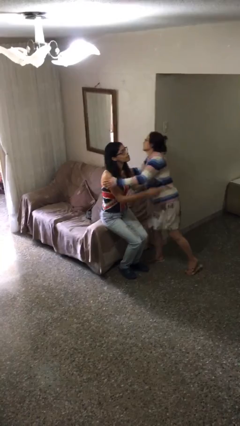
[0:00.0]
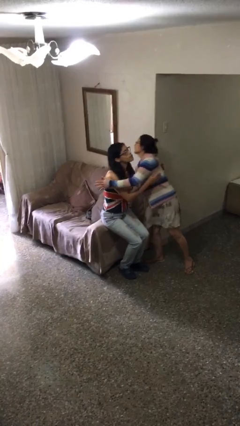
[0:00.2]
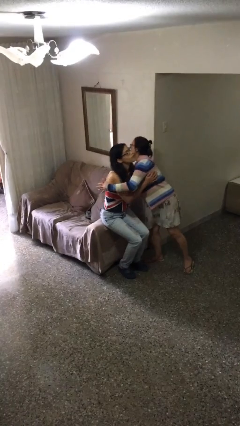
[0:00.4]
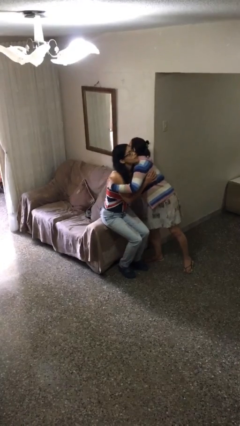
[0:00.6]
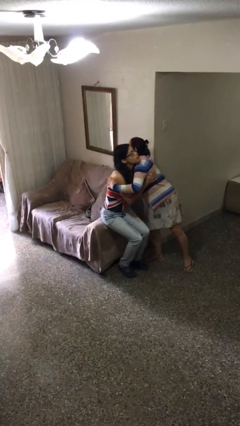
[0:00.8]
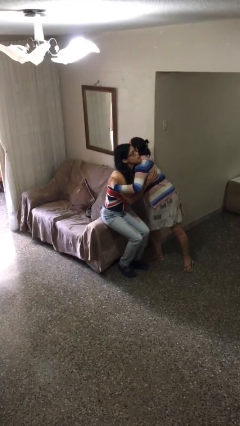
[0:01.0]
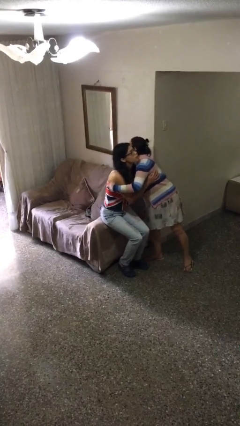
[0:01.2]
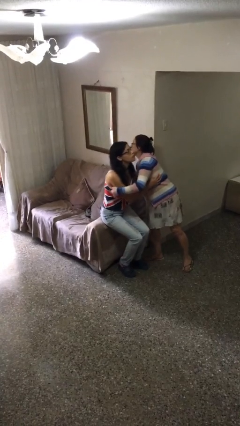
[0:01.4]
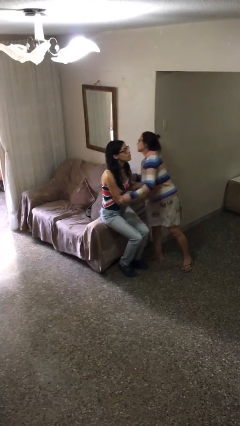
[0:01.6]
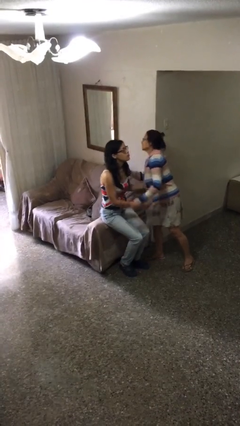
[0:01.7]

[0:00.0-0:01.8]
person embraces person

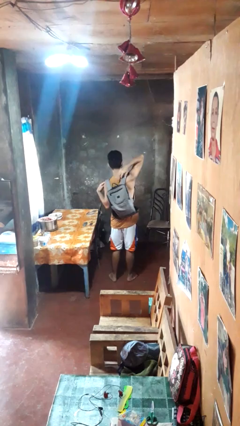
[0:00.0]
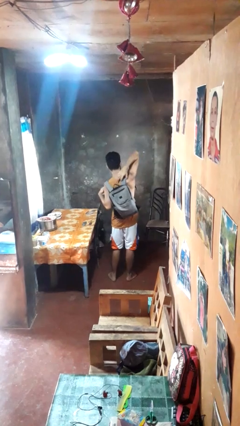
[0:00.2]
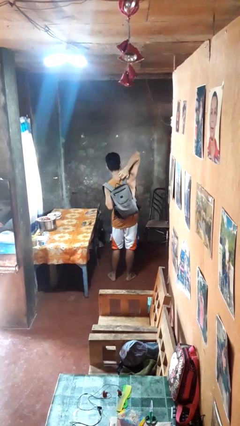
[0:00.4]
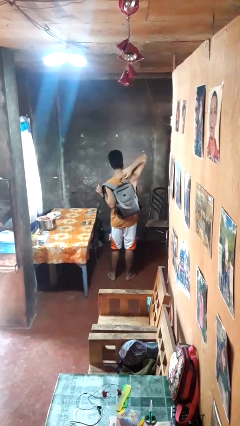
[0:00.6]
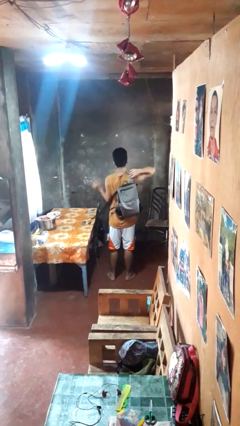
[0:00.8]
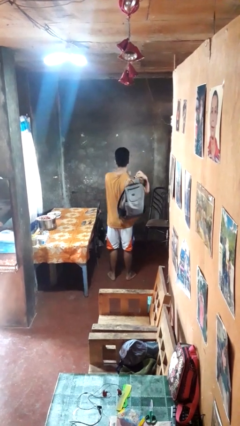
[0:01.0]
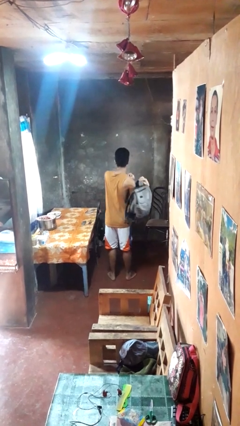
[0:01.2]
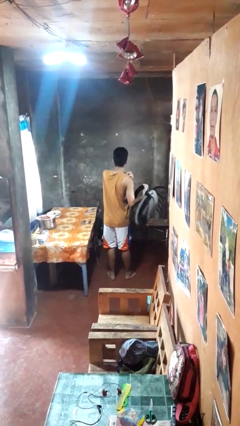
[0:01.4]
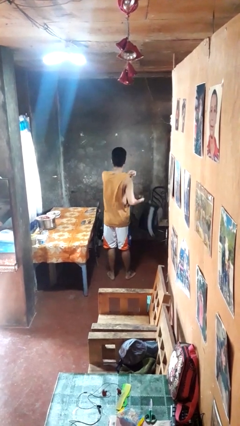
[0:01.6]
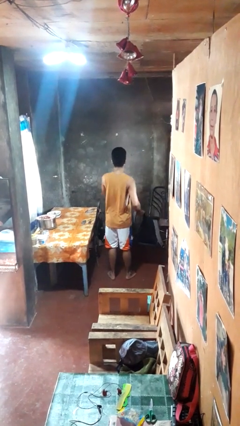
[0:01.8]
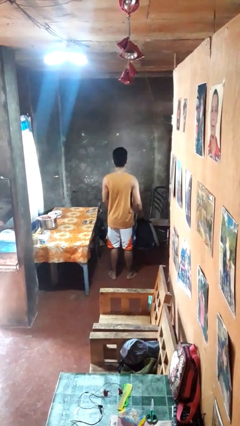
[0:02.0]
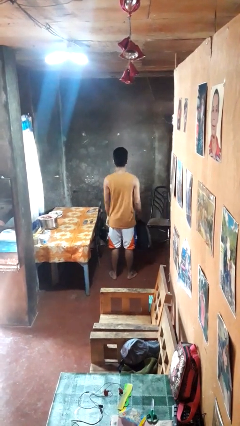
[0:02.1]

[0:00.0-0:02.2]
person takes off backpack

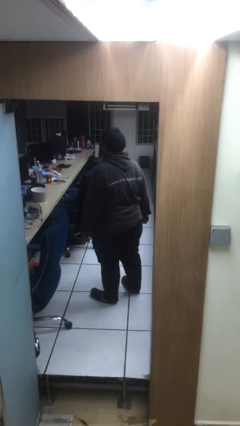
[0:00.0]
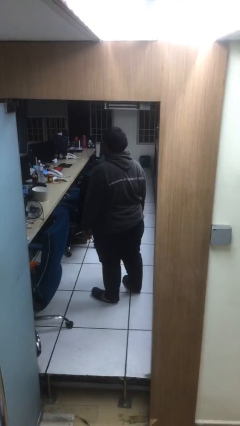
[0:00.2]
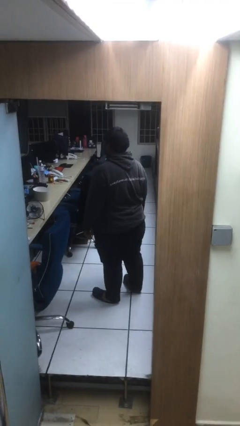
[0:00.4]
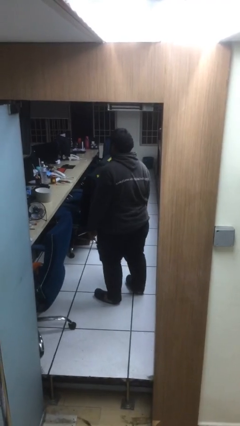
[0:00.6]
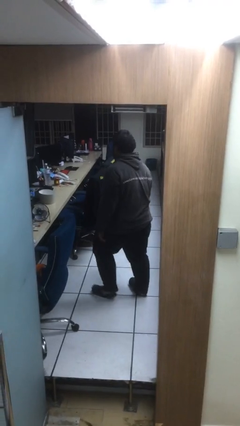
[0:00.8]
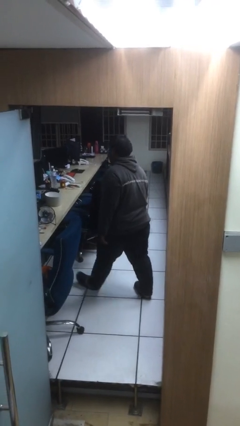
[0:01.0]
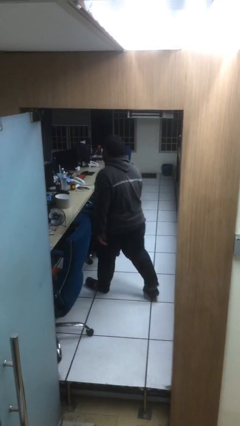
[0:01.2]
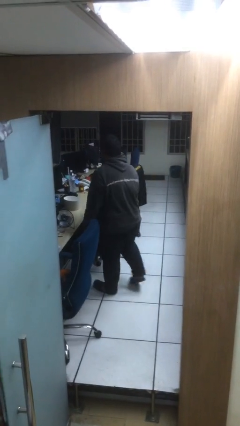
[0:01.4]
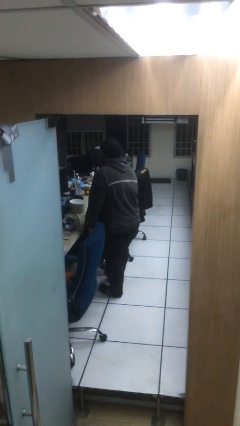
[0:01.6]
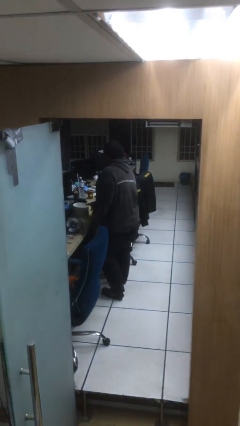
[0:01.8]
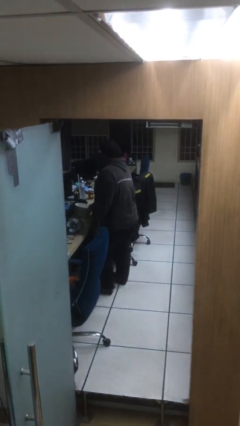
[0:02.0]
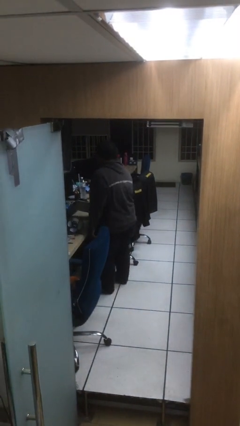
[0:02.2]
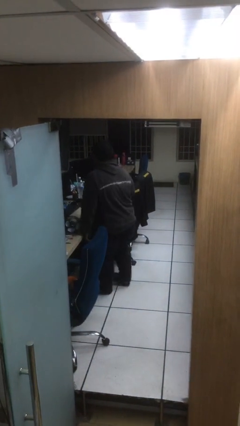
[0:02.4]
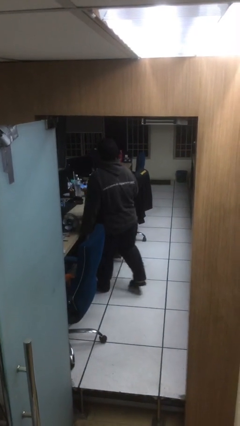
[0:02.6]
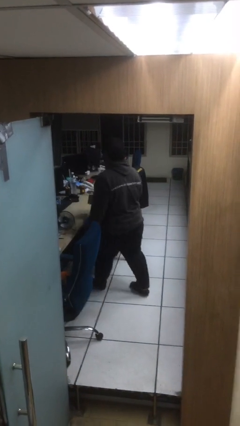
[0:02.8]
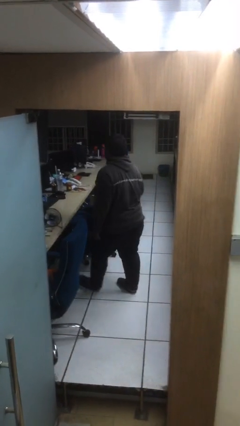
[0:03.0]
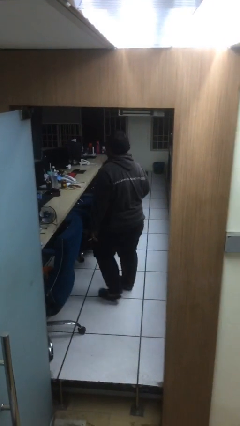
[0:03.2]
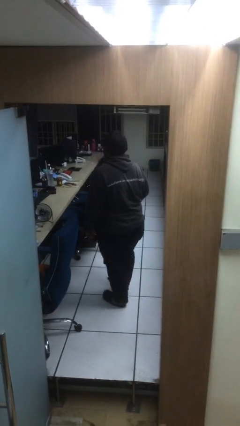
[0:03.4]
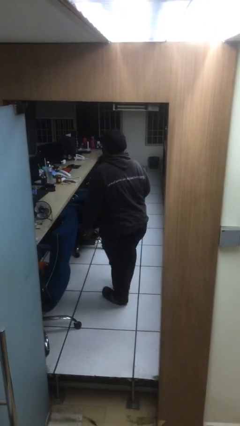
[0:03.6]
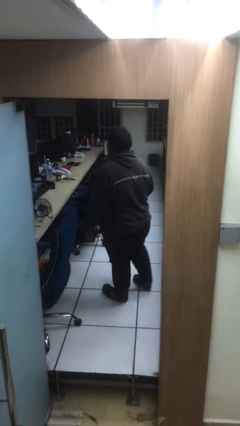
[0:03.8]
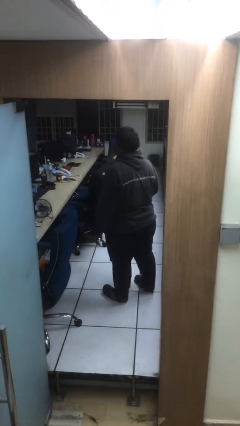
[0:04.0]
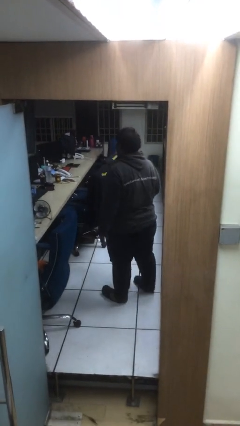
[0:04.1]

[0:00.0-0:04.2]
person picks up object from table

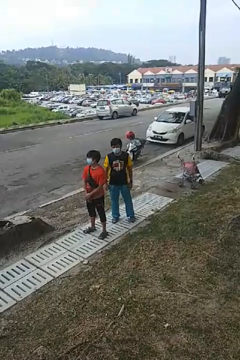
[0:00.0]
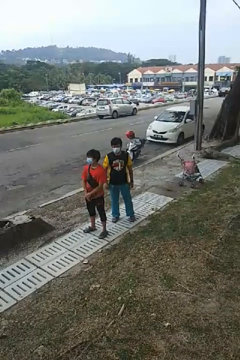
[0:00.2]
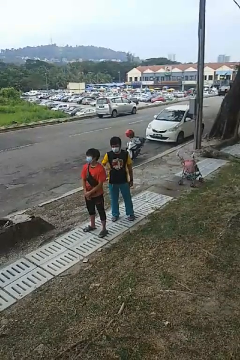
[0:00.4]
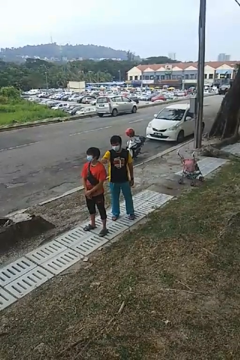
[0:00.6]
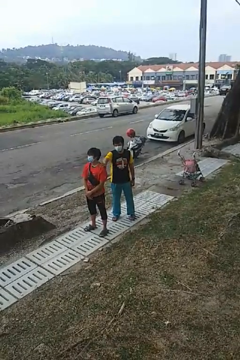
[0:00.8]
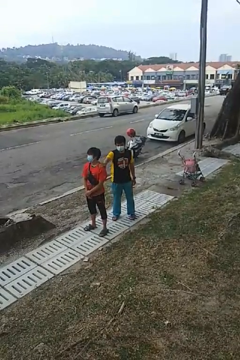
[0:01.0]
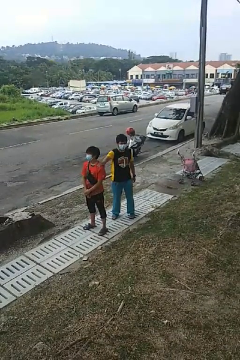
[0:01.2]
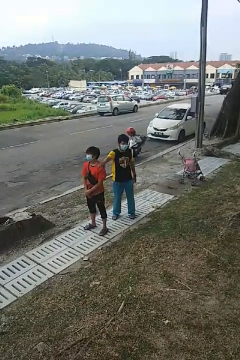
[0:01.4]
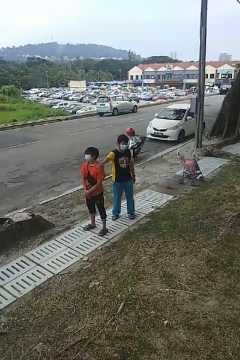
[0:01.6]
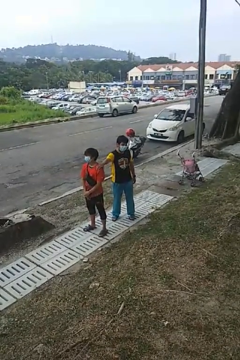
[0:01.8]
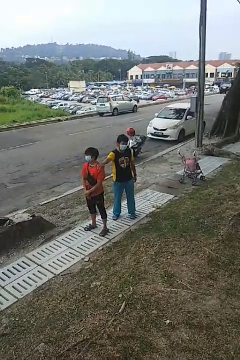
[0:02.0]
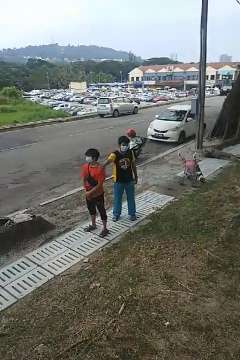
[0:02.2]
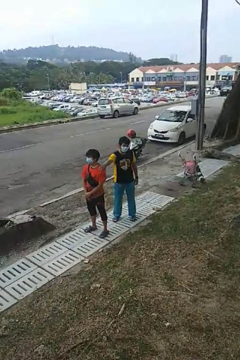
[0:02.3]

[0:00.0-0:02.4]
person grabs person by shoulder

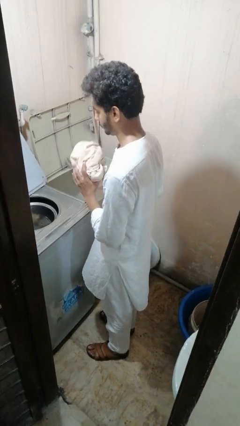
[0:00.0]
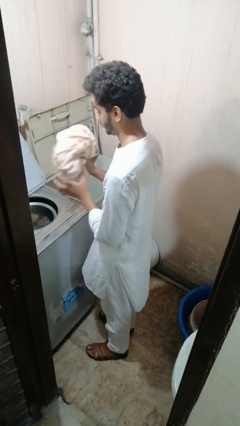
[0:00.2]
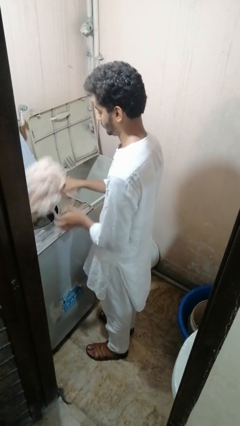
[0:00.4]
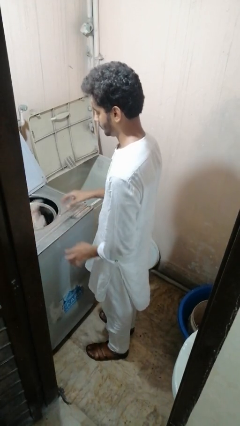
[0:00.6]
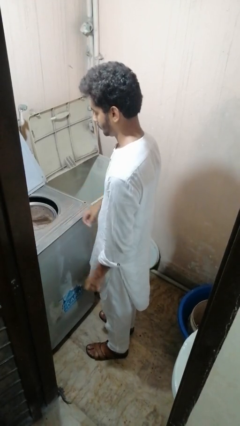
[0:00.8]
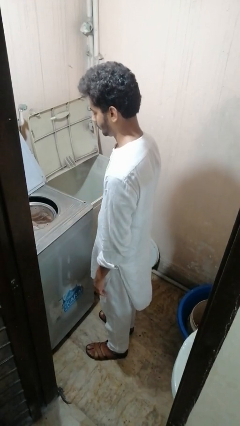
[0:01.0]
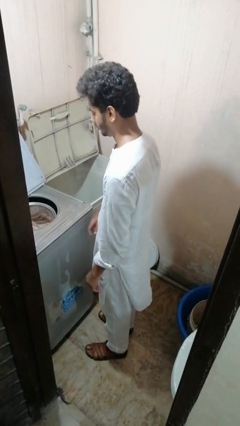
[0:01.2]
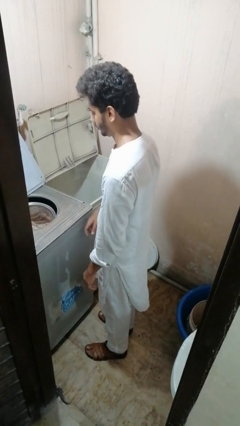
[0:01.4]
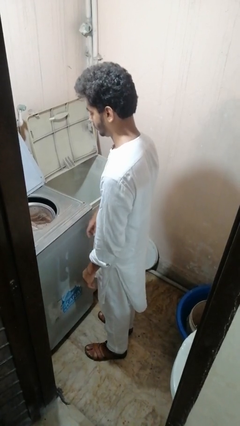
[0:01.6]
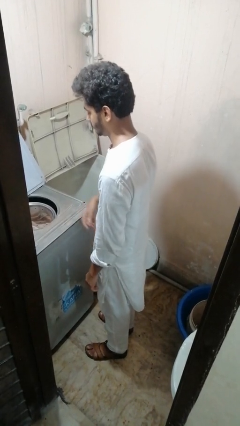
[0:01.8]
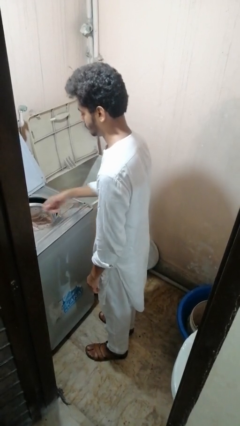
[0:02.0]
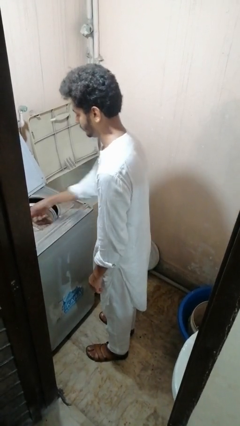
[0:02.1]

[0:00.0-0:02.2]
person loads dryer

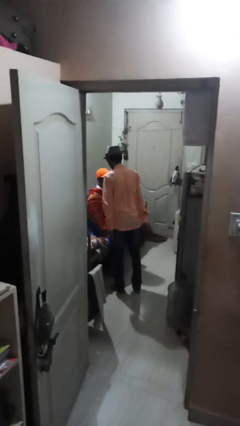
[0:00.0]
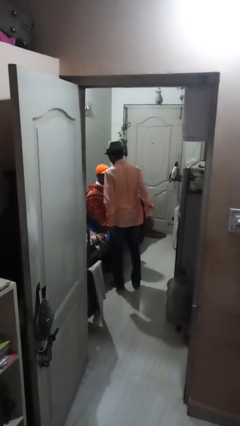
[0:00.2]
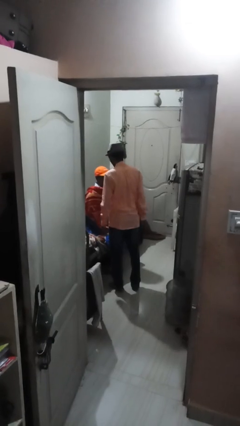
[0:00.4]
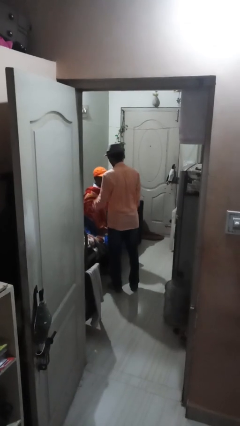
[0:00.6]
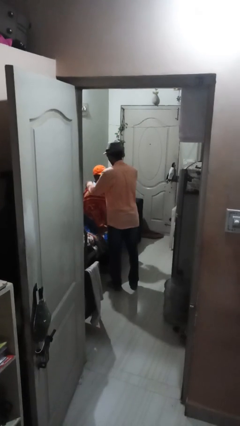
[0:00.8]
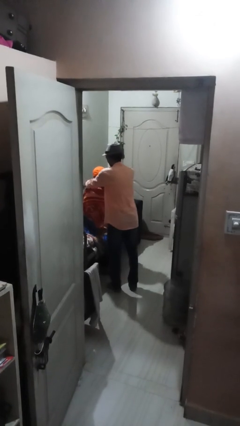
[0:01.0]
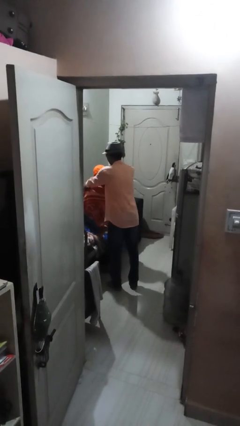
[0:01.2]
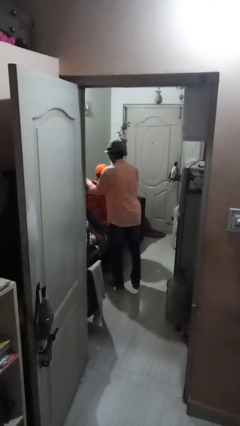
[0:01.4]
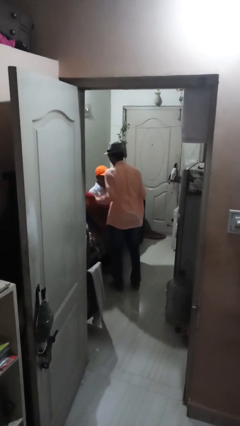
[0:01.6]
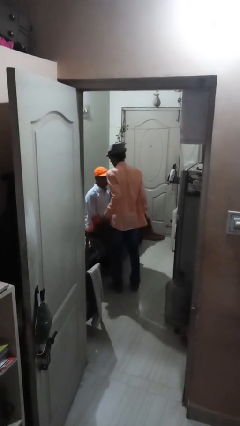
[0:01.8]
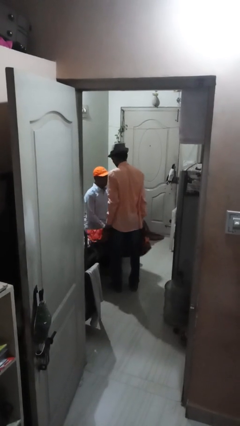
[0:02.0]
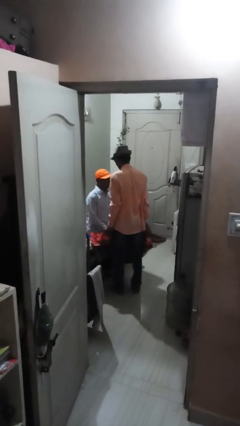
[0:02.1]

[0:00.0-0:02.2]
person covers friend with blanket

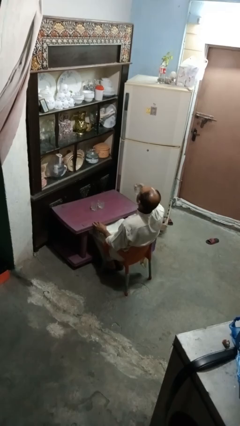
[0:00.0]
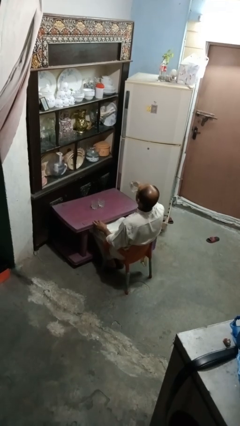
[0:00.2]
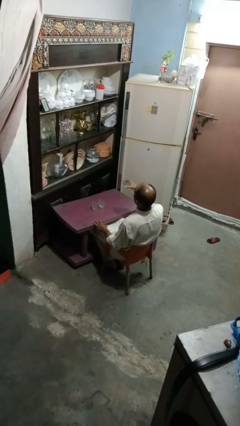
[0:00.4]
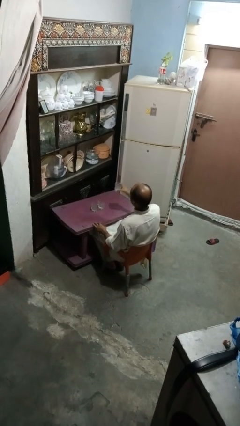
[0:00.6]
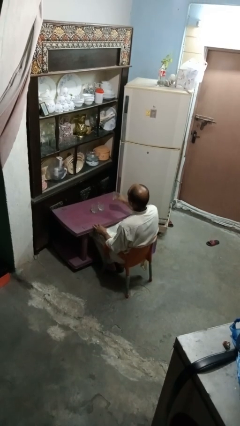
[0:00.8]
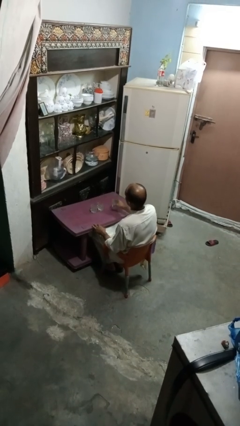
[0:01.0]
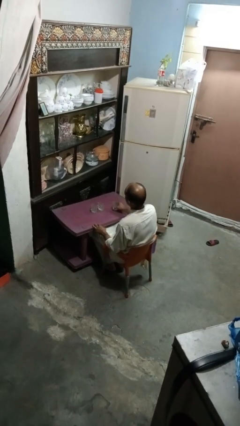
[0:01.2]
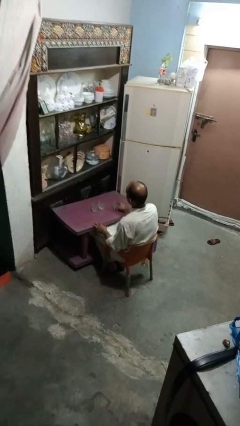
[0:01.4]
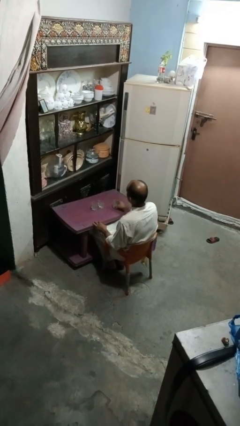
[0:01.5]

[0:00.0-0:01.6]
person puts down object on table

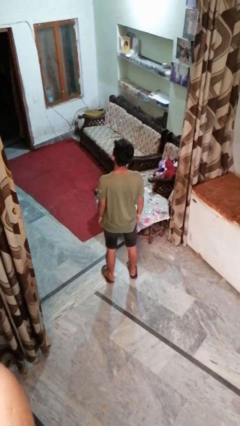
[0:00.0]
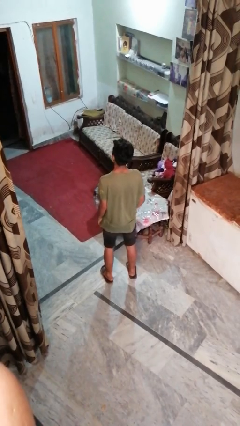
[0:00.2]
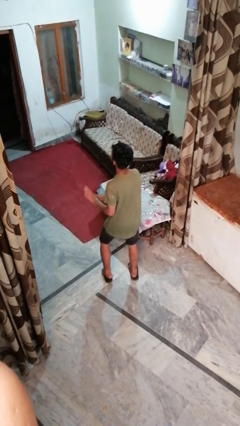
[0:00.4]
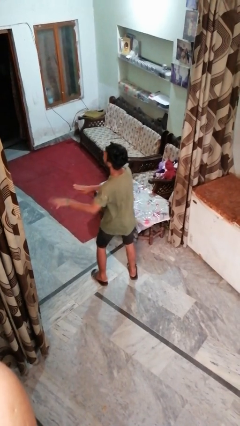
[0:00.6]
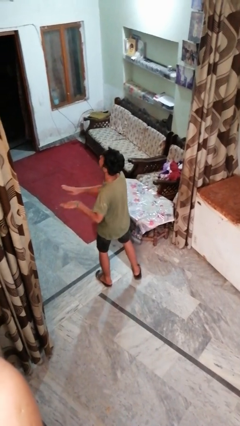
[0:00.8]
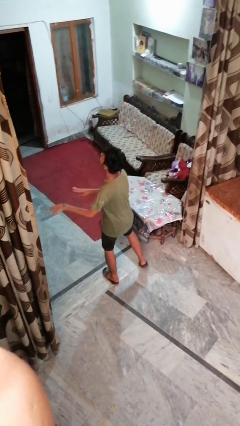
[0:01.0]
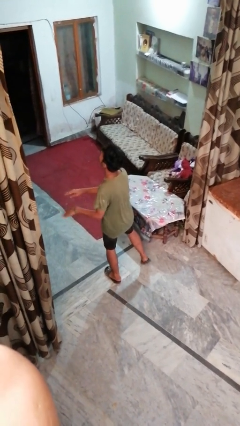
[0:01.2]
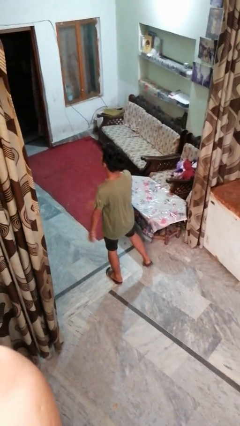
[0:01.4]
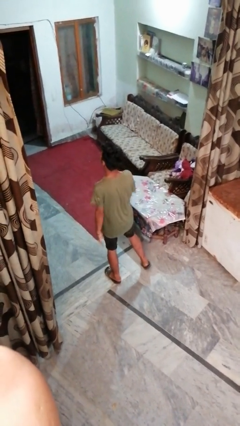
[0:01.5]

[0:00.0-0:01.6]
person dances in place
